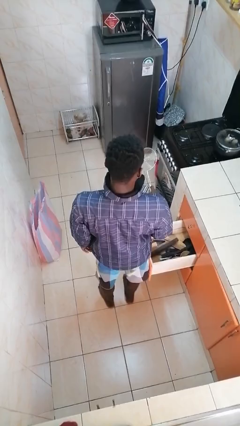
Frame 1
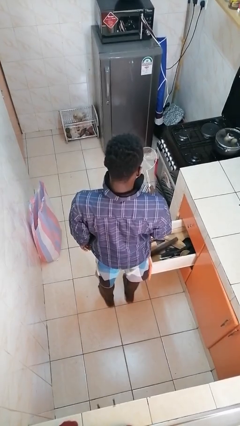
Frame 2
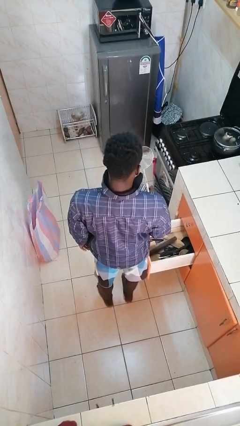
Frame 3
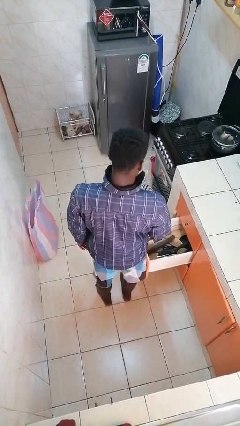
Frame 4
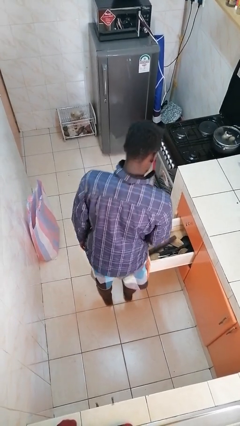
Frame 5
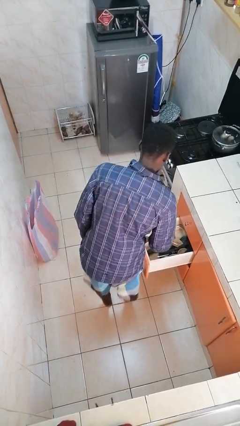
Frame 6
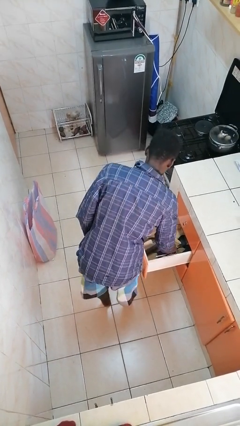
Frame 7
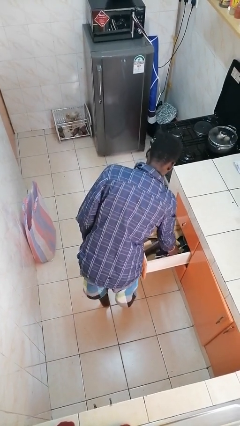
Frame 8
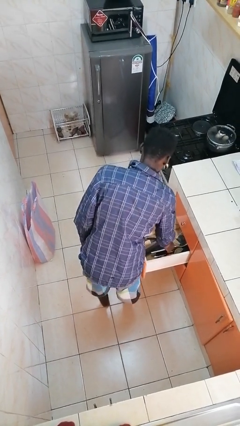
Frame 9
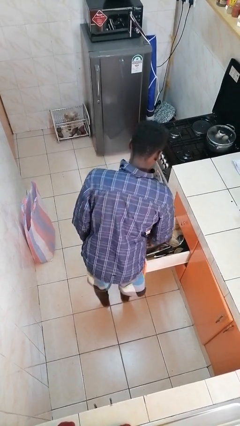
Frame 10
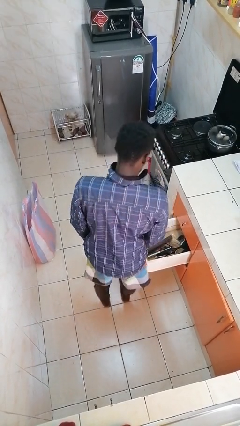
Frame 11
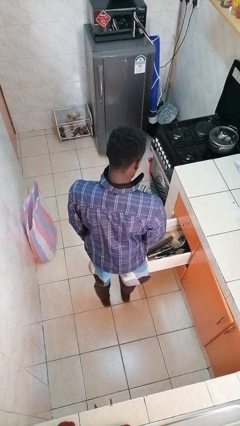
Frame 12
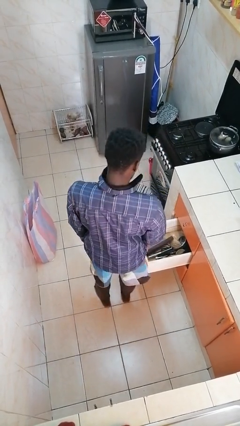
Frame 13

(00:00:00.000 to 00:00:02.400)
person puts object into kitchen drawer

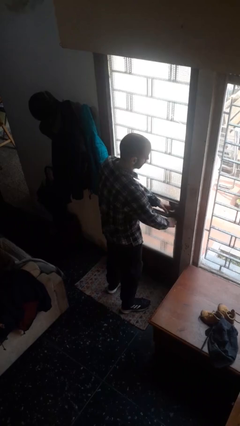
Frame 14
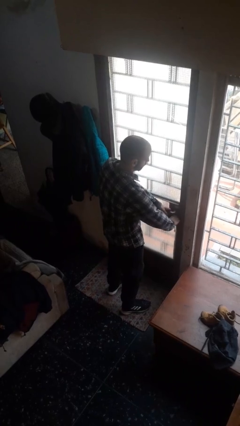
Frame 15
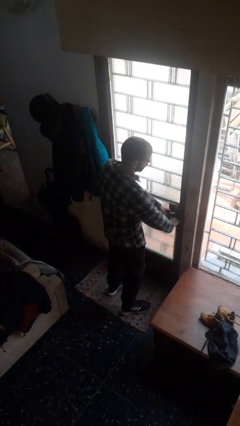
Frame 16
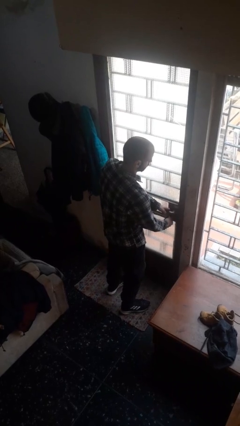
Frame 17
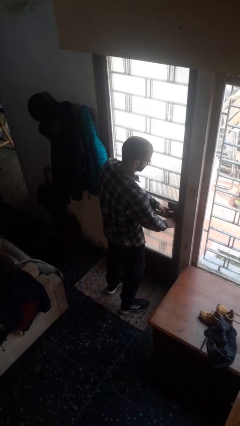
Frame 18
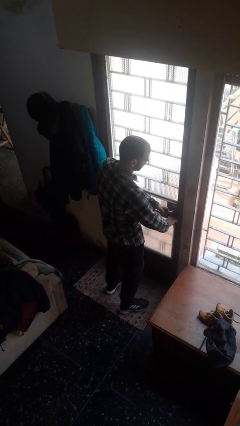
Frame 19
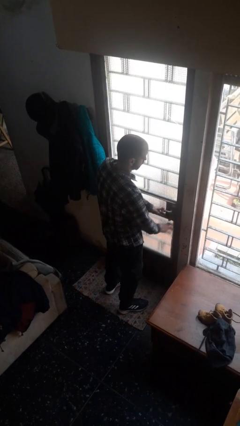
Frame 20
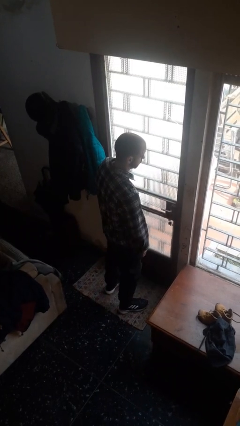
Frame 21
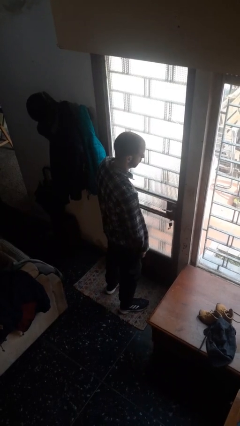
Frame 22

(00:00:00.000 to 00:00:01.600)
person unlocks door with keys

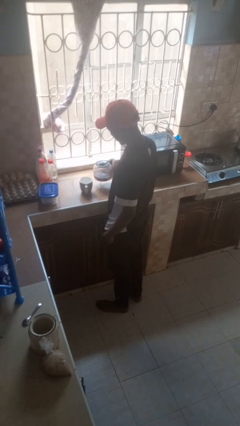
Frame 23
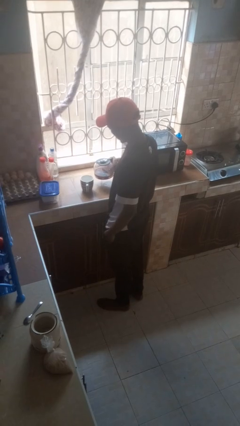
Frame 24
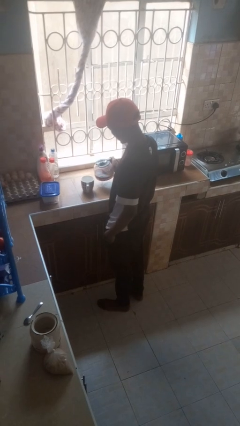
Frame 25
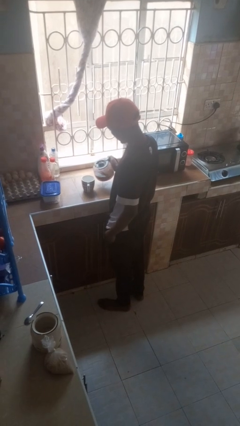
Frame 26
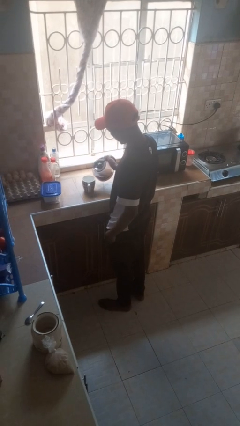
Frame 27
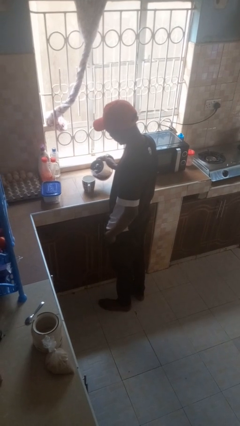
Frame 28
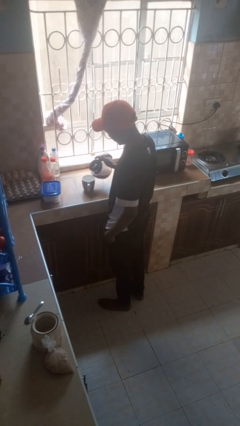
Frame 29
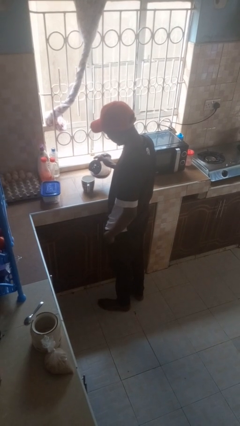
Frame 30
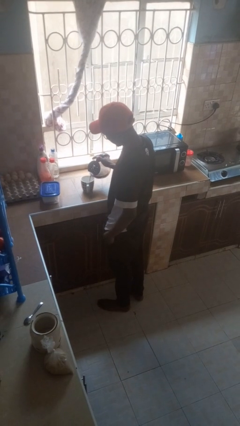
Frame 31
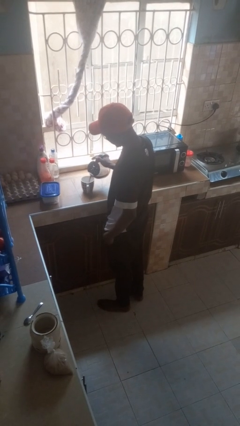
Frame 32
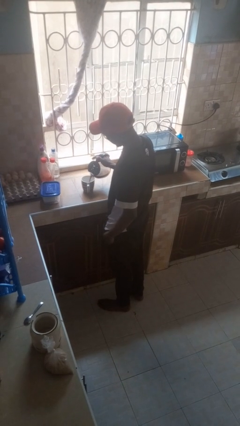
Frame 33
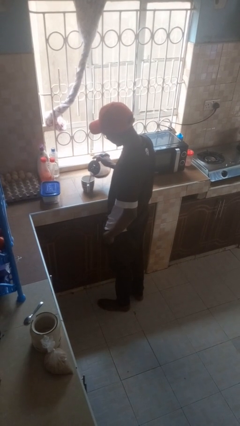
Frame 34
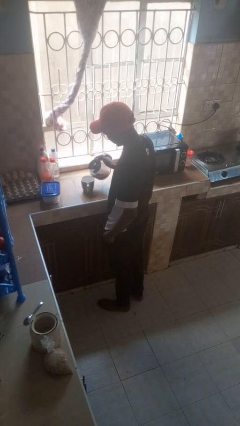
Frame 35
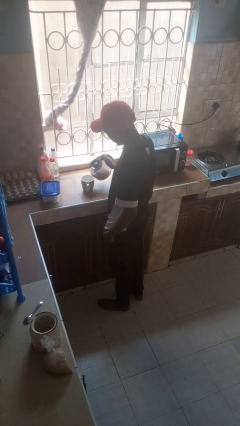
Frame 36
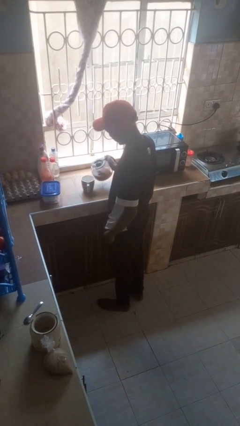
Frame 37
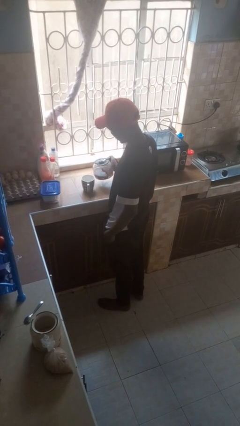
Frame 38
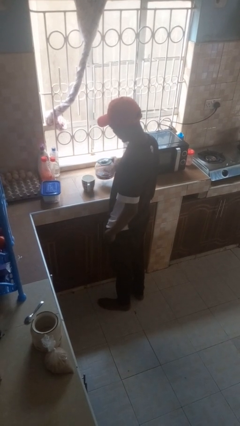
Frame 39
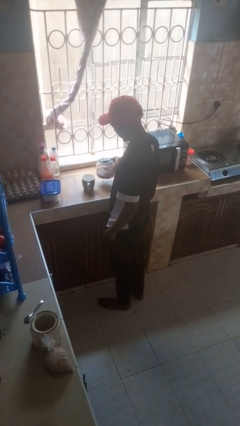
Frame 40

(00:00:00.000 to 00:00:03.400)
person pours coffee into mug

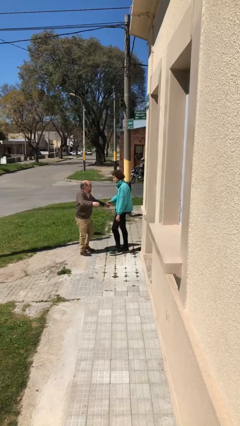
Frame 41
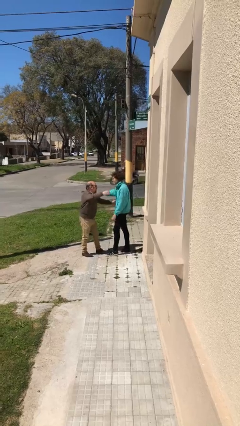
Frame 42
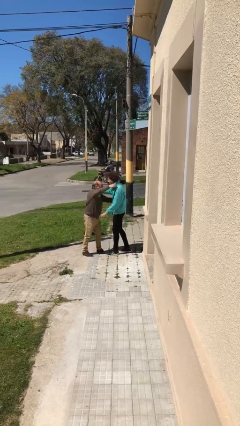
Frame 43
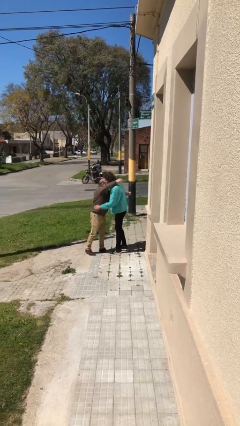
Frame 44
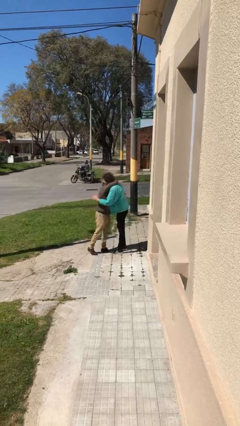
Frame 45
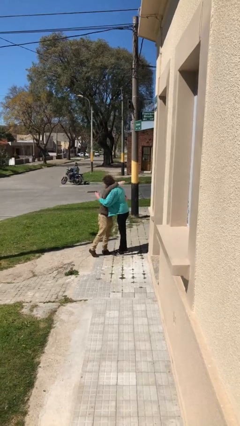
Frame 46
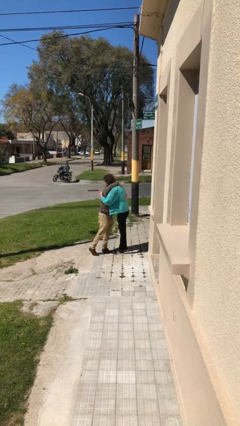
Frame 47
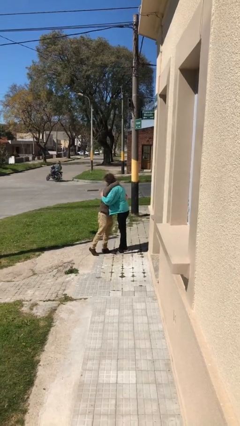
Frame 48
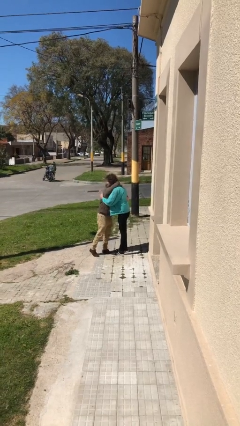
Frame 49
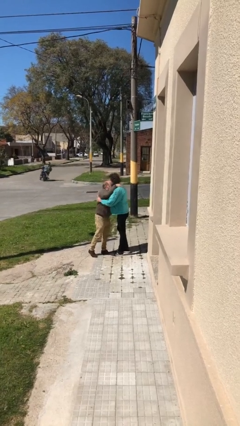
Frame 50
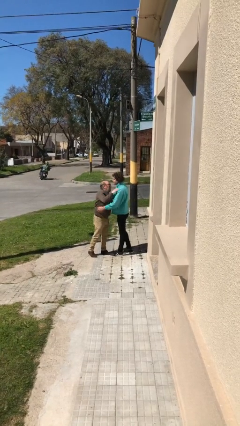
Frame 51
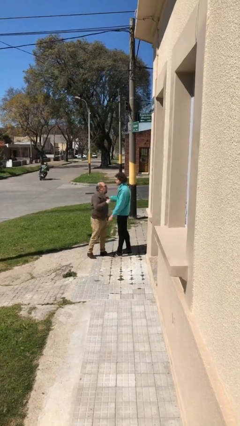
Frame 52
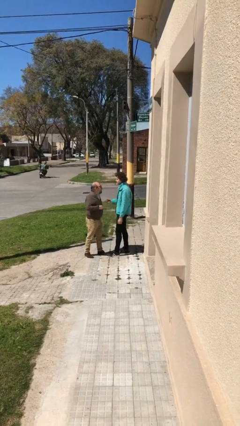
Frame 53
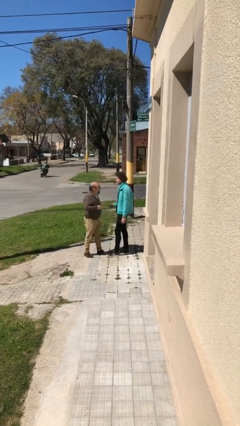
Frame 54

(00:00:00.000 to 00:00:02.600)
person embraces person

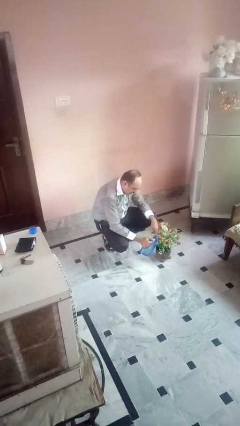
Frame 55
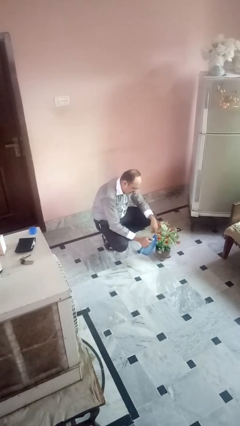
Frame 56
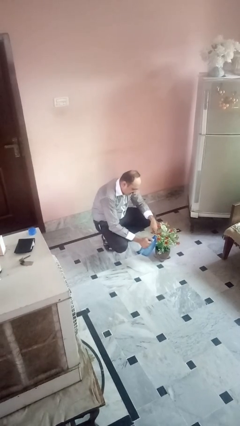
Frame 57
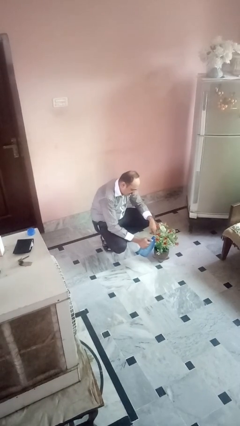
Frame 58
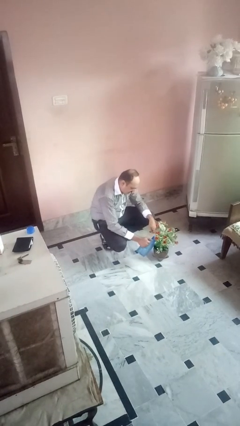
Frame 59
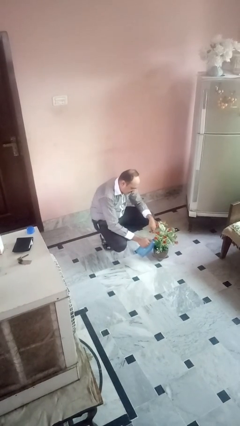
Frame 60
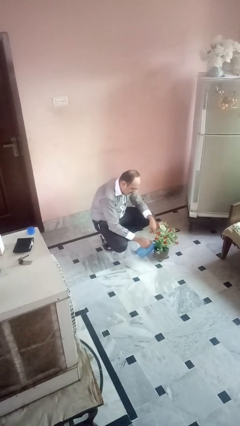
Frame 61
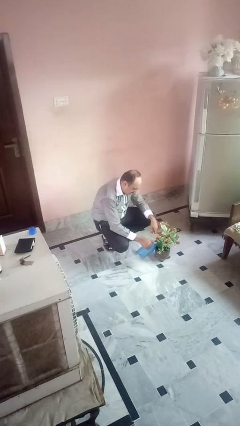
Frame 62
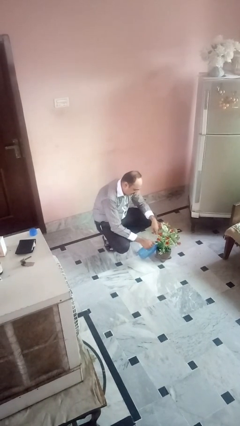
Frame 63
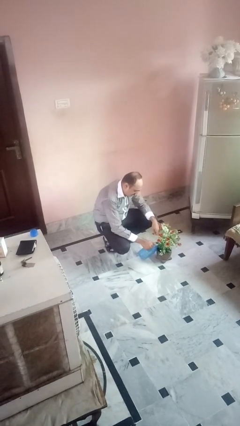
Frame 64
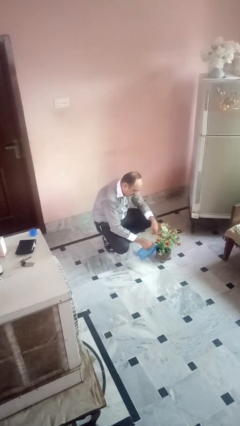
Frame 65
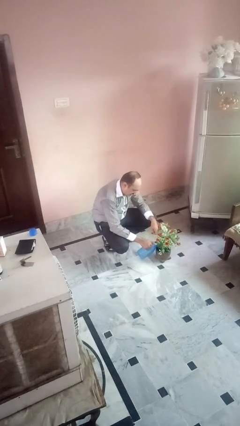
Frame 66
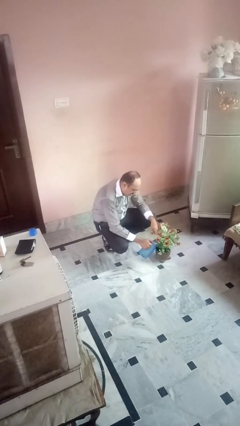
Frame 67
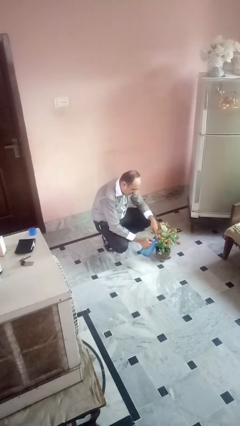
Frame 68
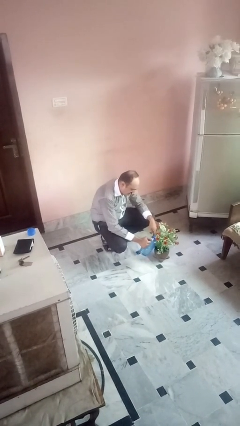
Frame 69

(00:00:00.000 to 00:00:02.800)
person waters houseplant

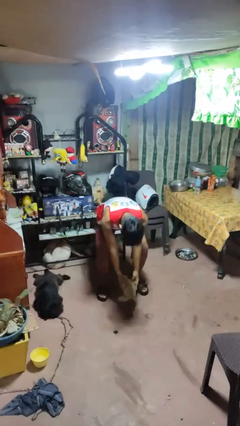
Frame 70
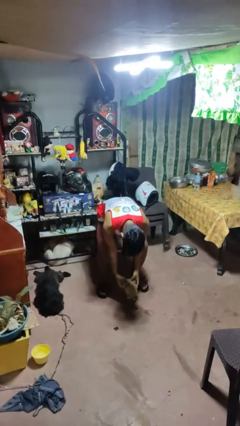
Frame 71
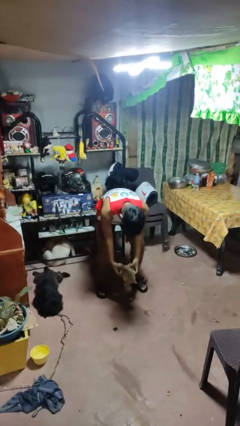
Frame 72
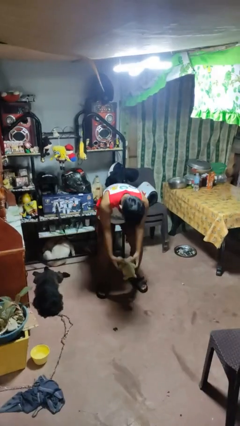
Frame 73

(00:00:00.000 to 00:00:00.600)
person catches dropped object

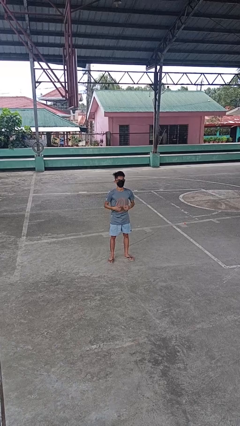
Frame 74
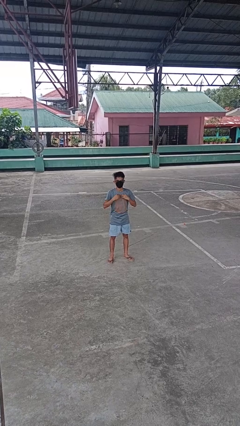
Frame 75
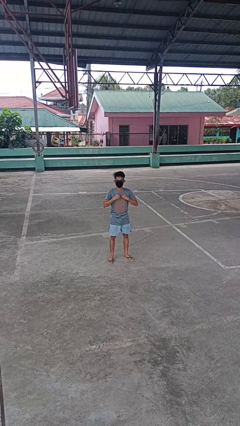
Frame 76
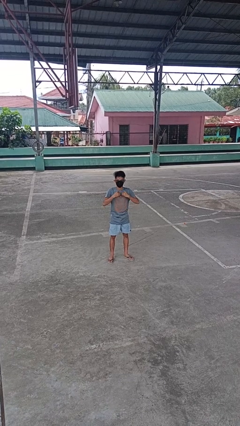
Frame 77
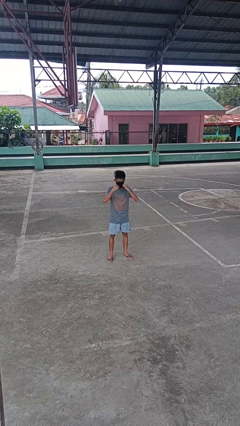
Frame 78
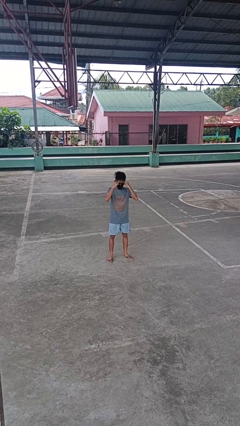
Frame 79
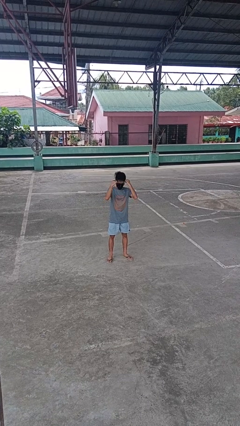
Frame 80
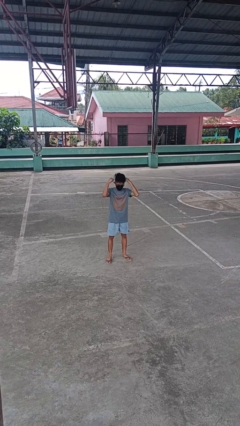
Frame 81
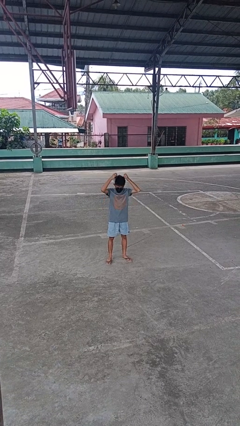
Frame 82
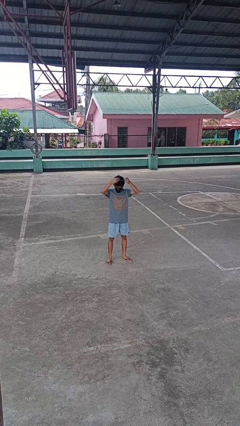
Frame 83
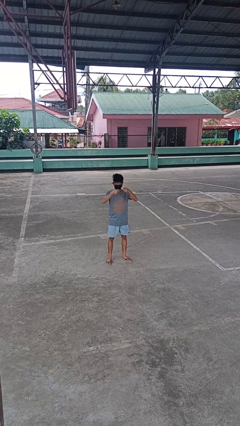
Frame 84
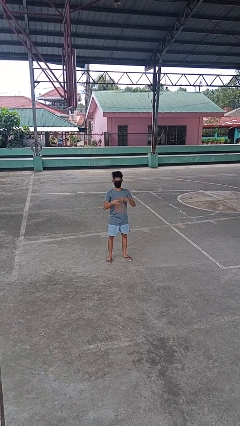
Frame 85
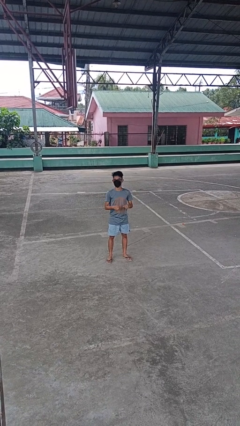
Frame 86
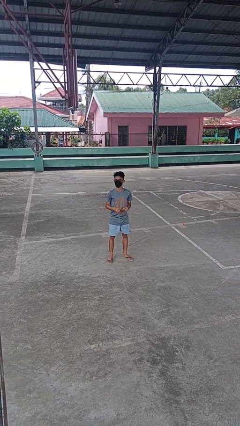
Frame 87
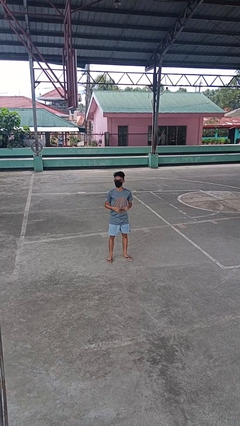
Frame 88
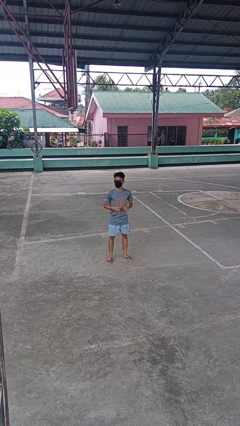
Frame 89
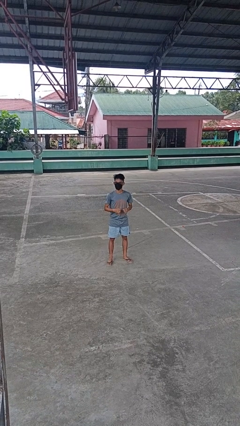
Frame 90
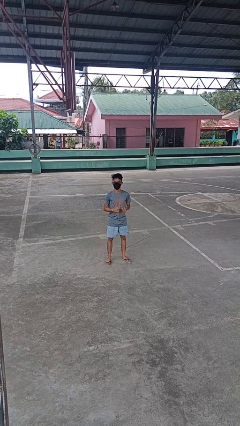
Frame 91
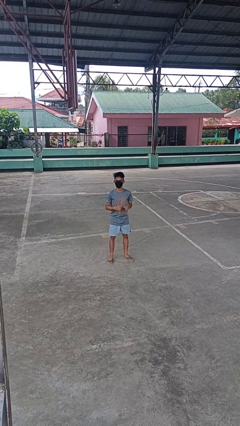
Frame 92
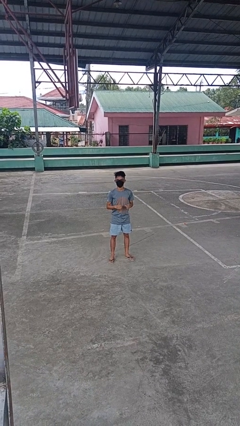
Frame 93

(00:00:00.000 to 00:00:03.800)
person takes off necklace

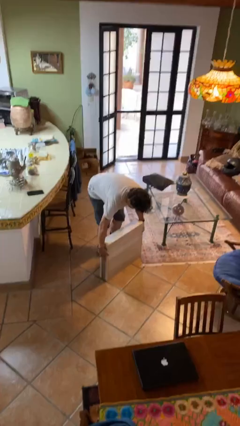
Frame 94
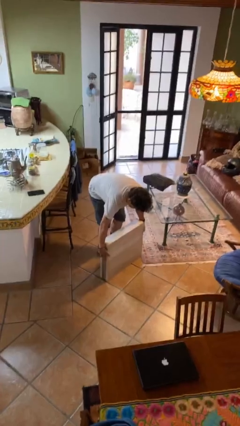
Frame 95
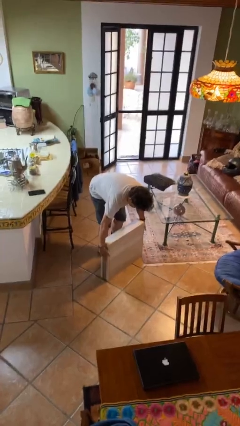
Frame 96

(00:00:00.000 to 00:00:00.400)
person puts down object on floor
